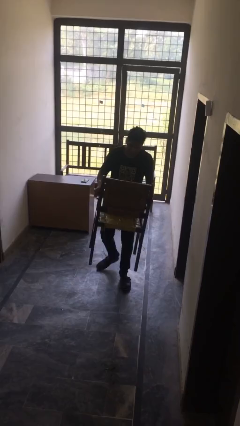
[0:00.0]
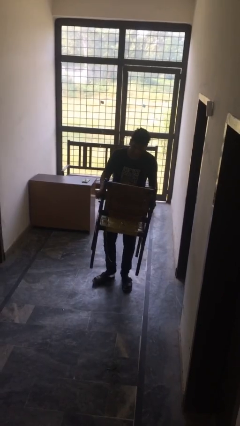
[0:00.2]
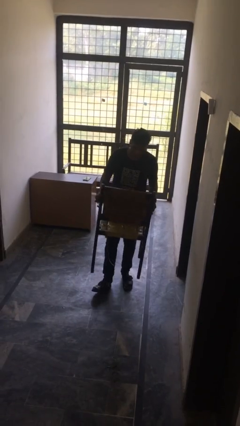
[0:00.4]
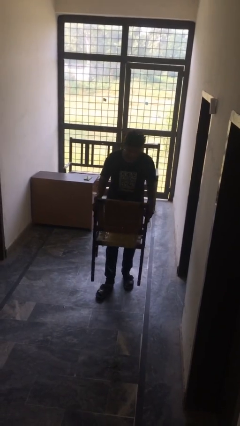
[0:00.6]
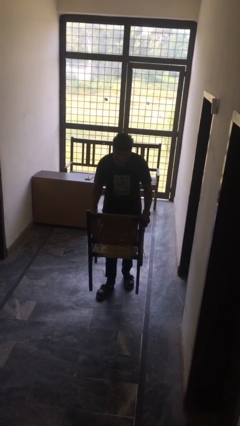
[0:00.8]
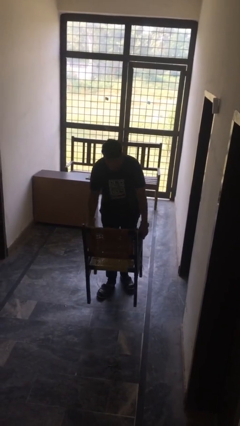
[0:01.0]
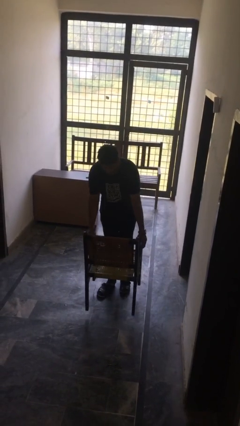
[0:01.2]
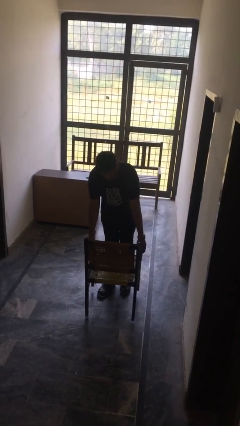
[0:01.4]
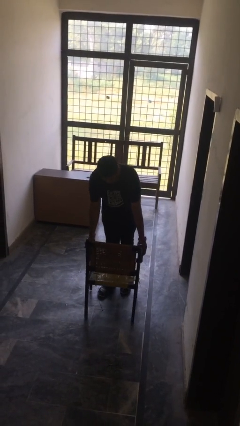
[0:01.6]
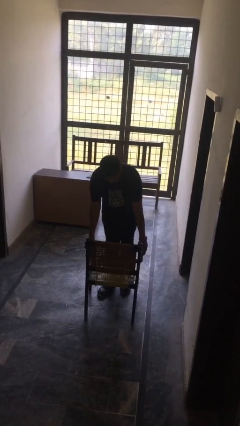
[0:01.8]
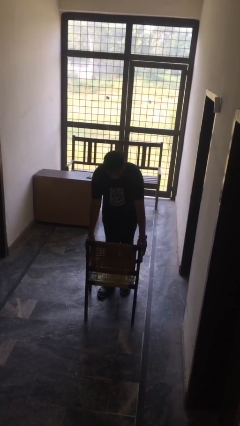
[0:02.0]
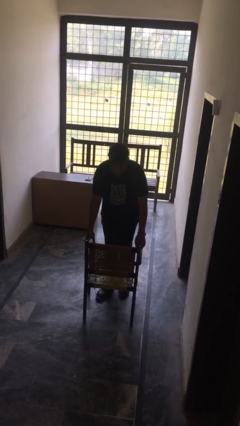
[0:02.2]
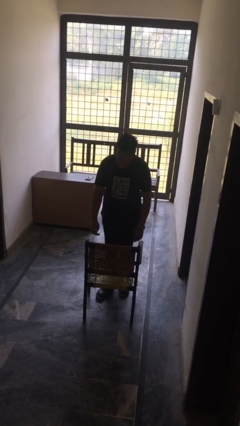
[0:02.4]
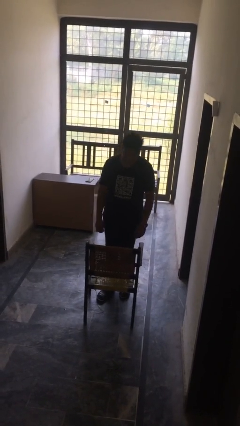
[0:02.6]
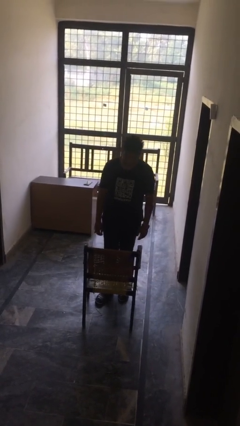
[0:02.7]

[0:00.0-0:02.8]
person puts down object on table

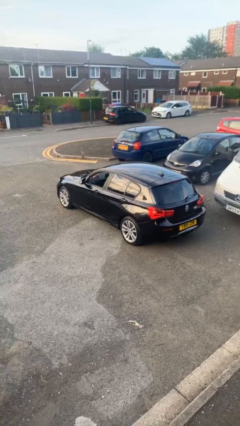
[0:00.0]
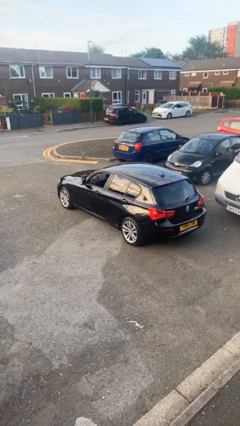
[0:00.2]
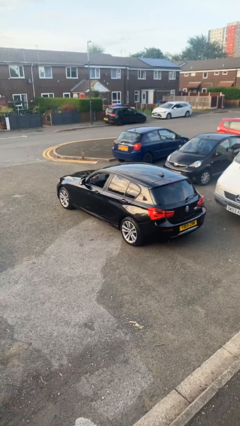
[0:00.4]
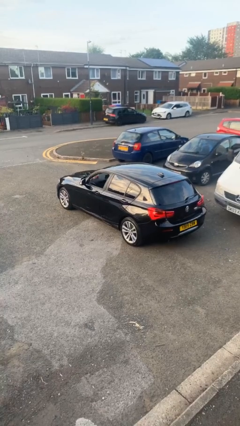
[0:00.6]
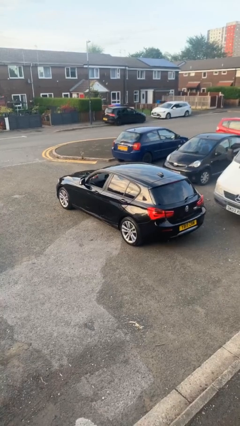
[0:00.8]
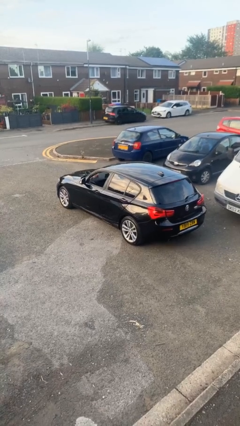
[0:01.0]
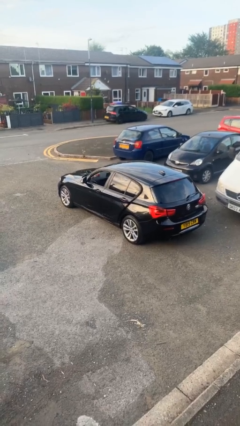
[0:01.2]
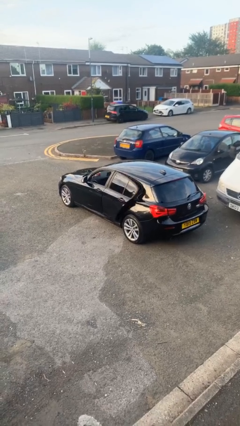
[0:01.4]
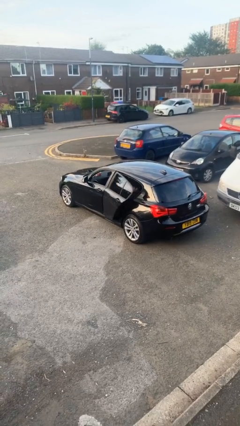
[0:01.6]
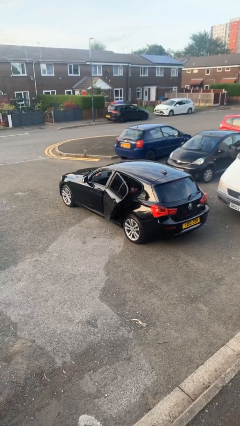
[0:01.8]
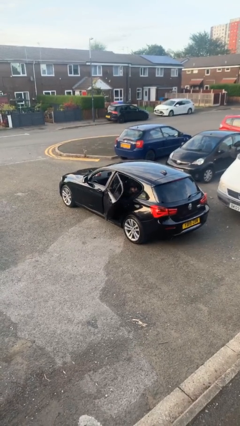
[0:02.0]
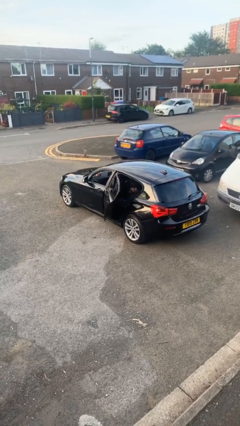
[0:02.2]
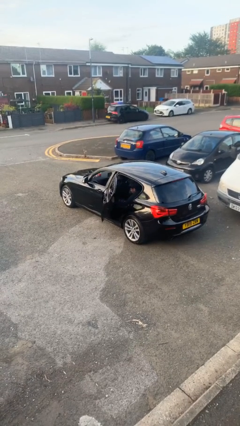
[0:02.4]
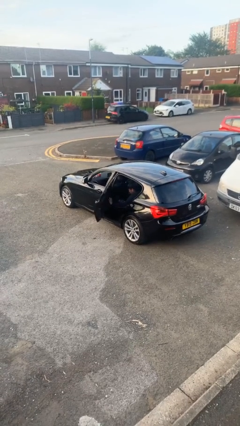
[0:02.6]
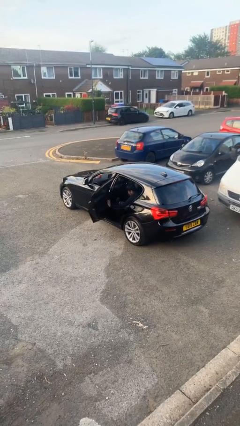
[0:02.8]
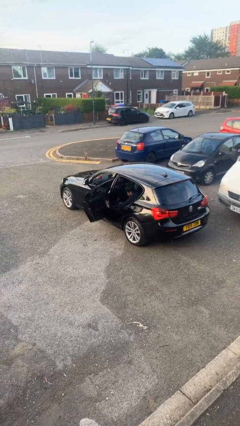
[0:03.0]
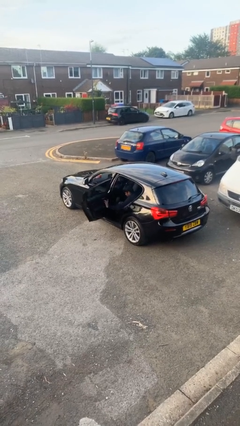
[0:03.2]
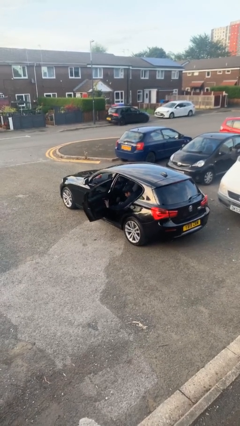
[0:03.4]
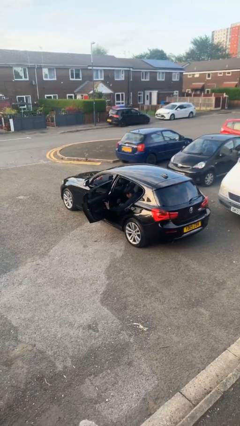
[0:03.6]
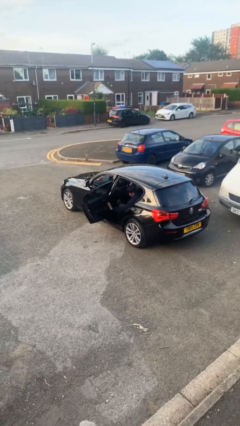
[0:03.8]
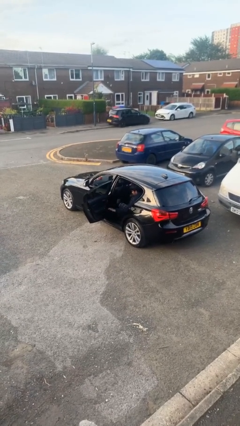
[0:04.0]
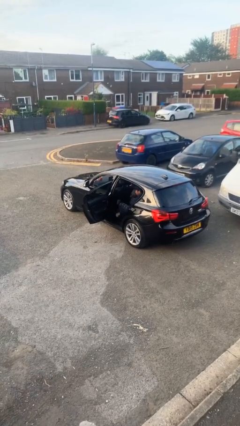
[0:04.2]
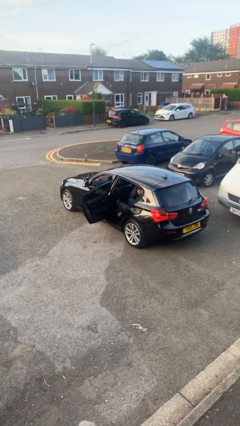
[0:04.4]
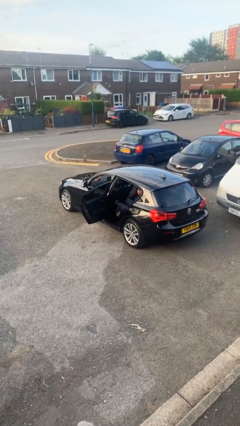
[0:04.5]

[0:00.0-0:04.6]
person opens car door

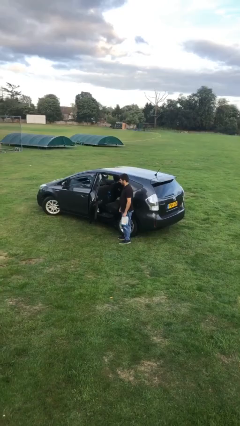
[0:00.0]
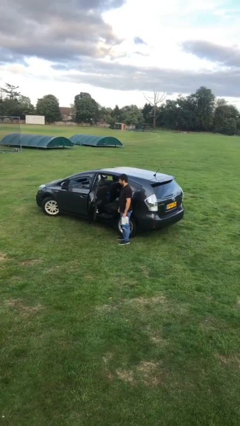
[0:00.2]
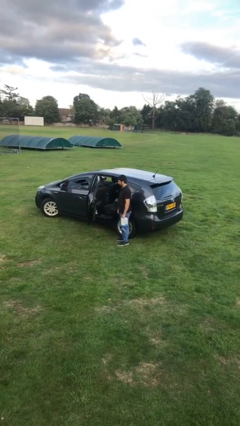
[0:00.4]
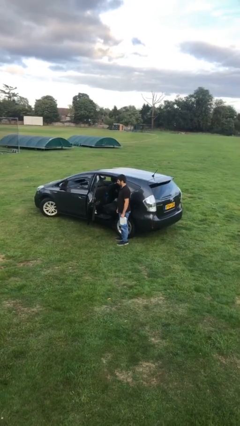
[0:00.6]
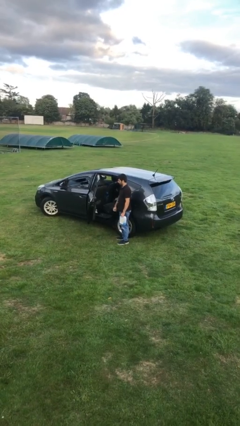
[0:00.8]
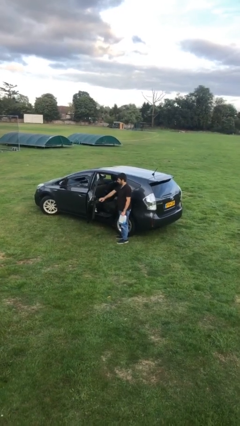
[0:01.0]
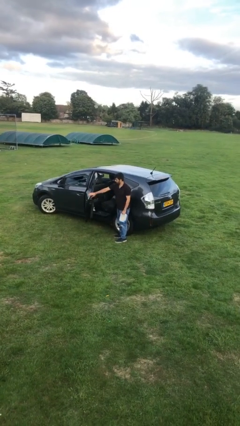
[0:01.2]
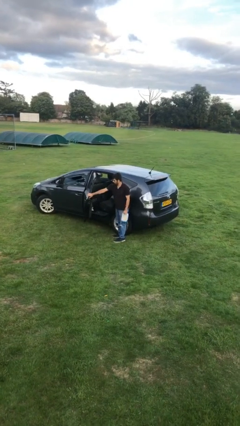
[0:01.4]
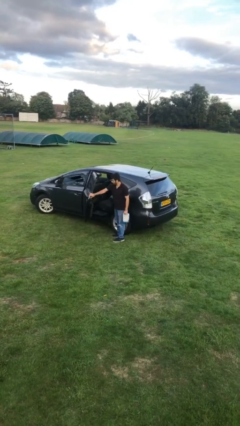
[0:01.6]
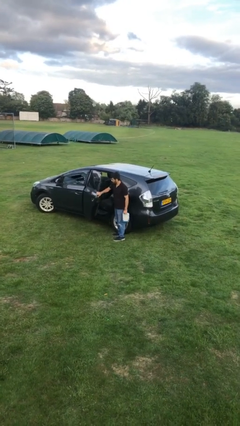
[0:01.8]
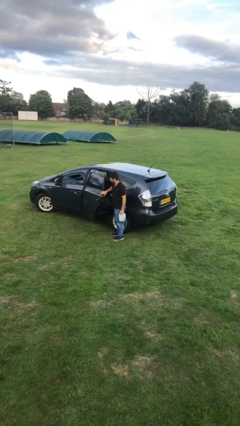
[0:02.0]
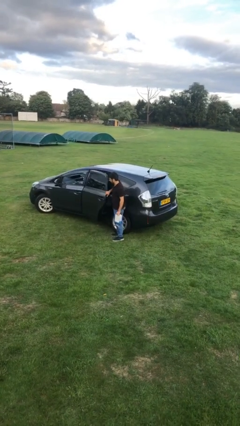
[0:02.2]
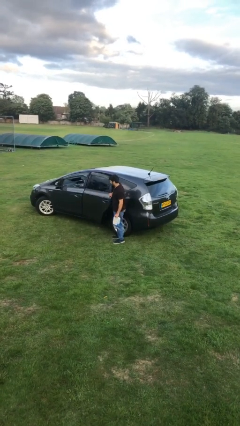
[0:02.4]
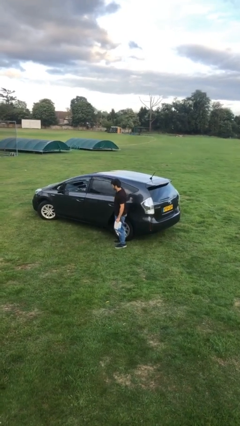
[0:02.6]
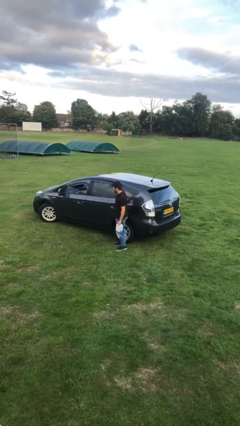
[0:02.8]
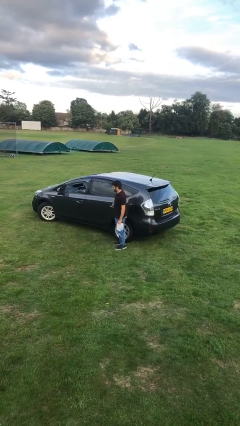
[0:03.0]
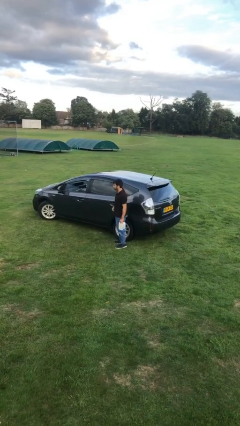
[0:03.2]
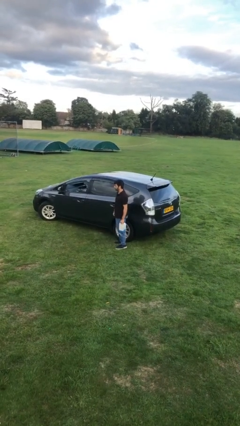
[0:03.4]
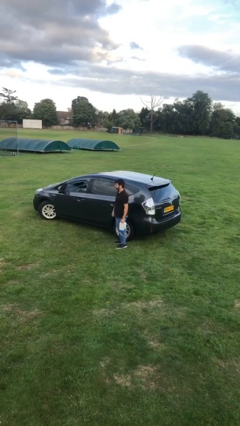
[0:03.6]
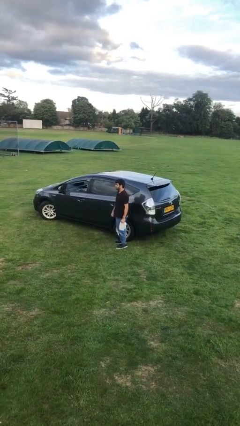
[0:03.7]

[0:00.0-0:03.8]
person closes car door

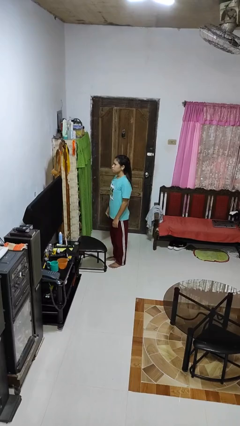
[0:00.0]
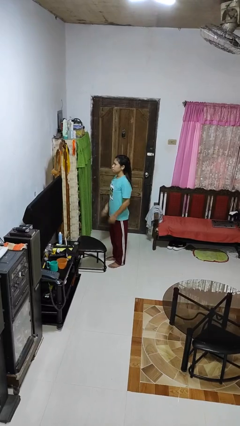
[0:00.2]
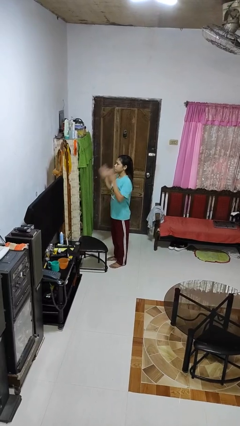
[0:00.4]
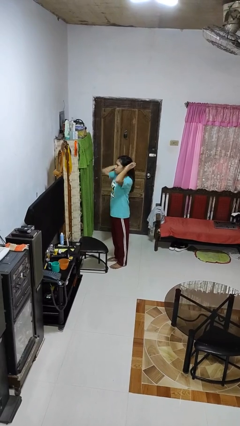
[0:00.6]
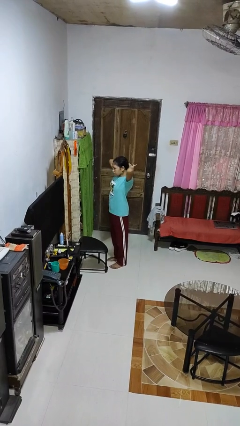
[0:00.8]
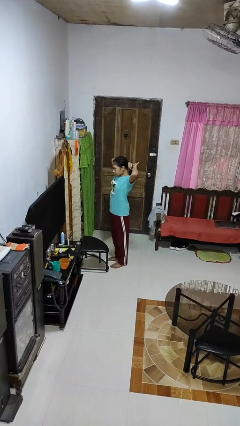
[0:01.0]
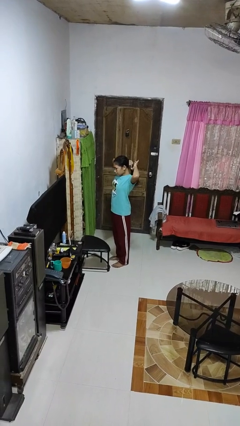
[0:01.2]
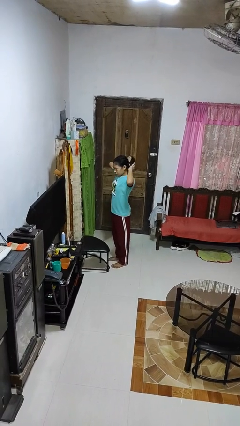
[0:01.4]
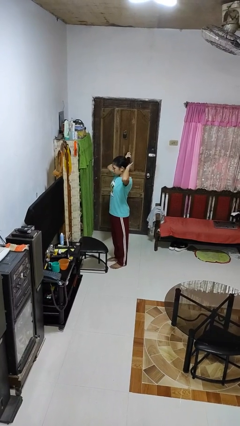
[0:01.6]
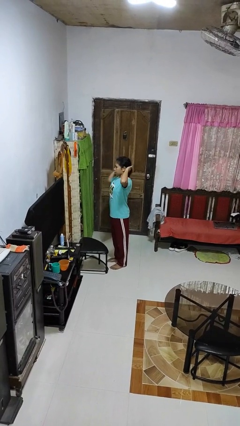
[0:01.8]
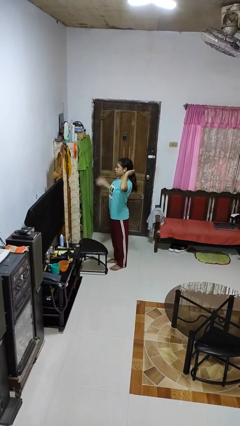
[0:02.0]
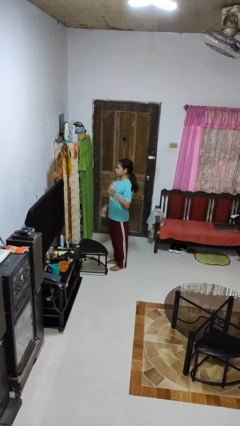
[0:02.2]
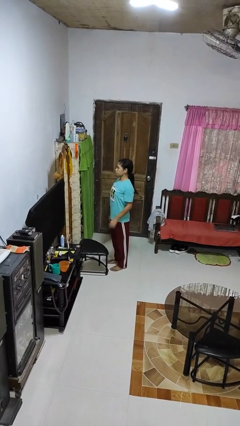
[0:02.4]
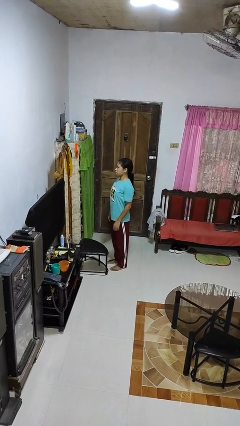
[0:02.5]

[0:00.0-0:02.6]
person puts hair in ponytail

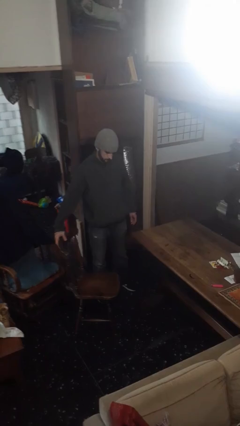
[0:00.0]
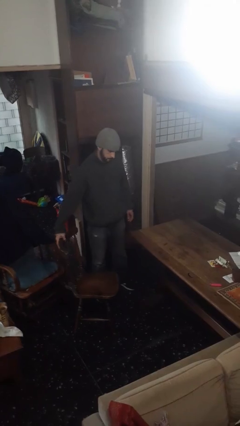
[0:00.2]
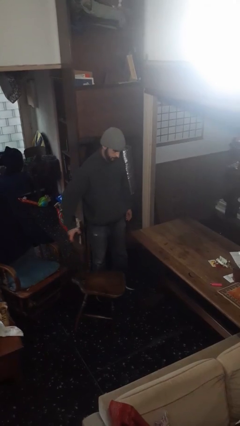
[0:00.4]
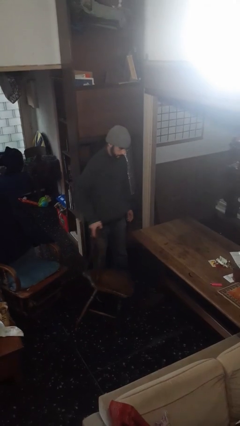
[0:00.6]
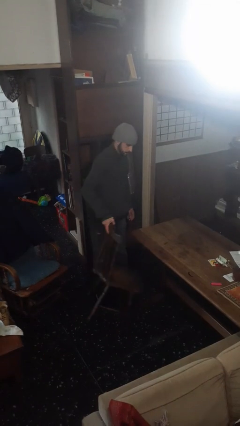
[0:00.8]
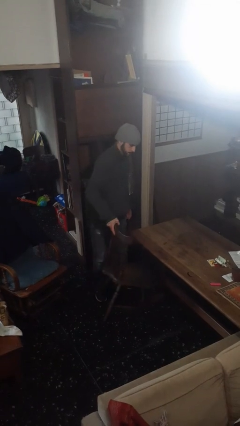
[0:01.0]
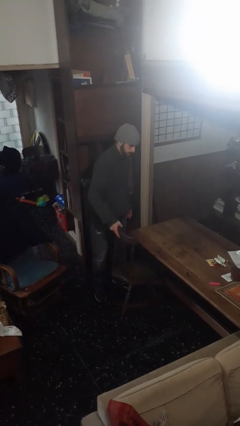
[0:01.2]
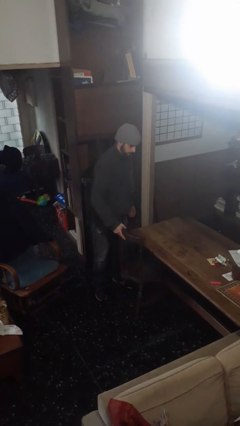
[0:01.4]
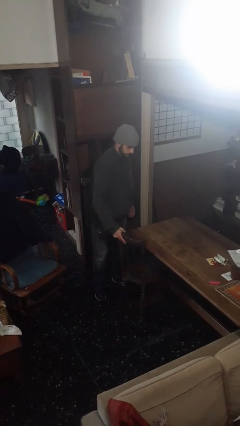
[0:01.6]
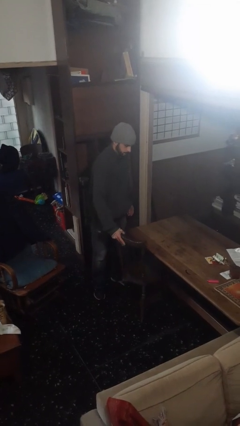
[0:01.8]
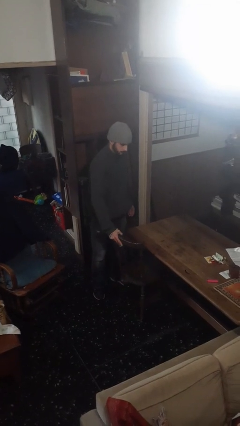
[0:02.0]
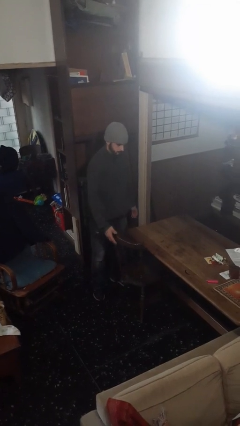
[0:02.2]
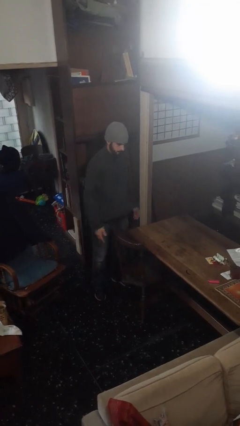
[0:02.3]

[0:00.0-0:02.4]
person pushes in chair

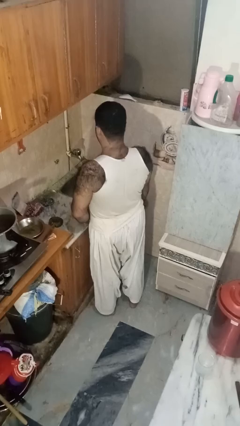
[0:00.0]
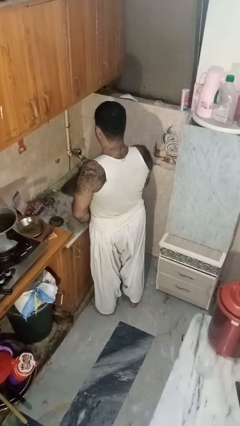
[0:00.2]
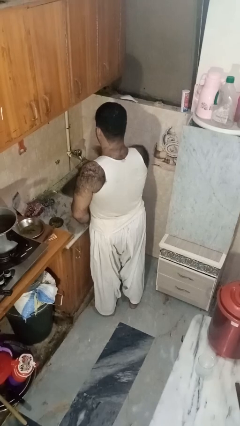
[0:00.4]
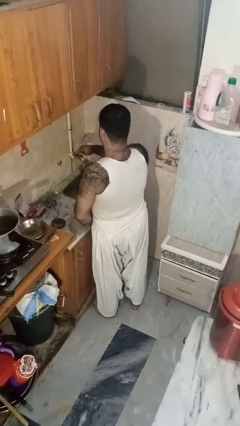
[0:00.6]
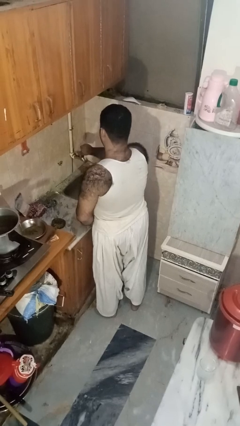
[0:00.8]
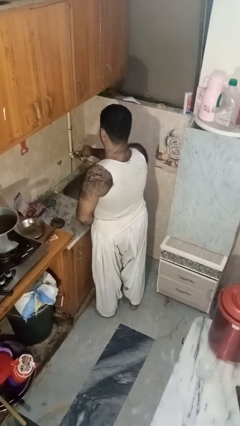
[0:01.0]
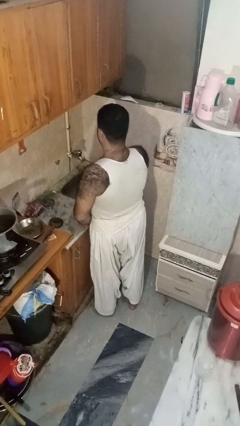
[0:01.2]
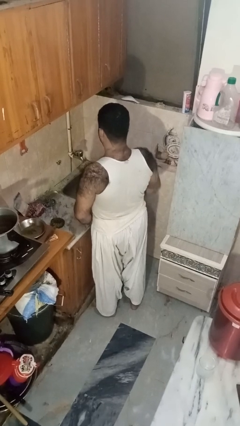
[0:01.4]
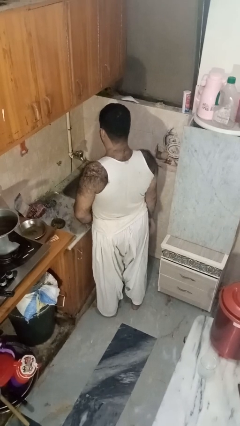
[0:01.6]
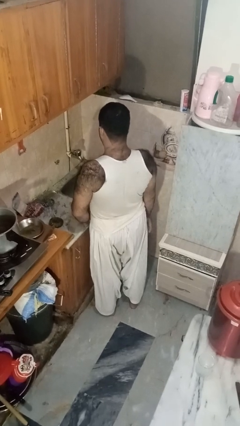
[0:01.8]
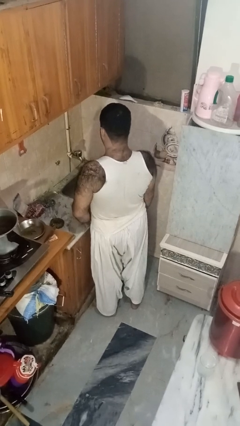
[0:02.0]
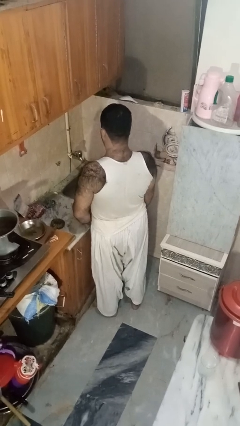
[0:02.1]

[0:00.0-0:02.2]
person turns off faucet
